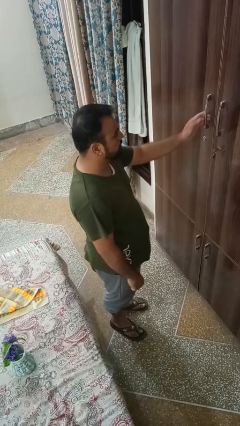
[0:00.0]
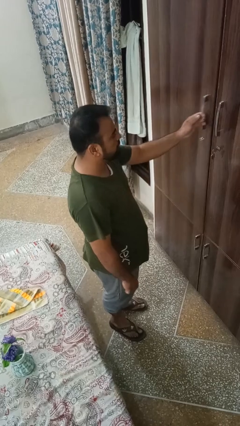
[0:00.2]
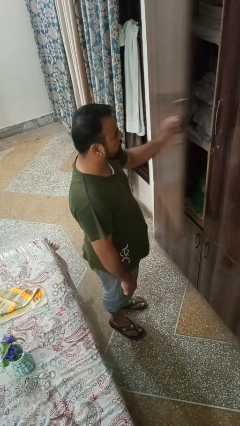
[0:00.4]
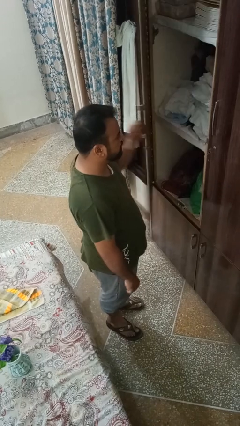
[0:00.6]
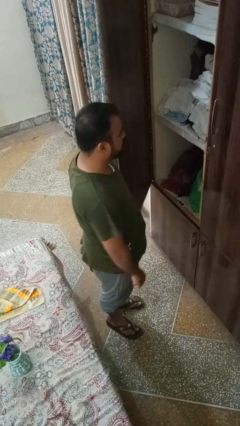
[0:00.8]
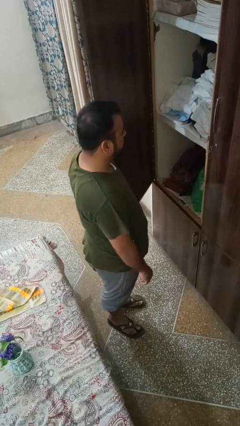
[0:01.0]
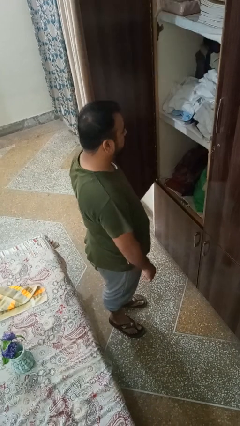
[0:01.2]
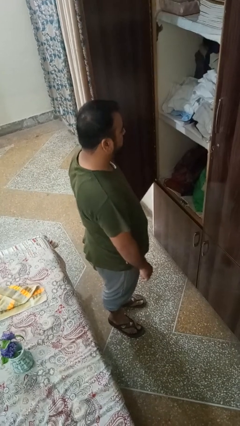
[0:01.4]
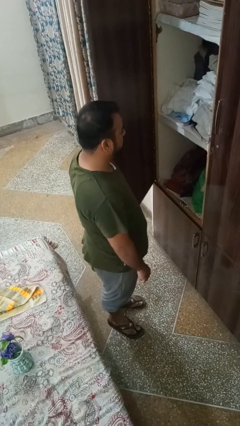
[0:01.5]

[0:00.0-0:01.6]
person opens closet door

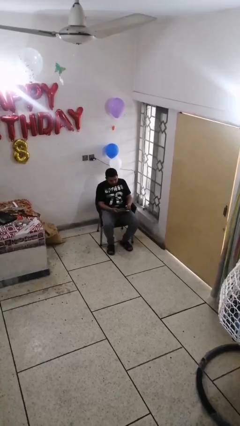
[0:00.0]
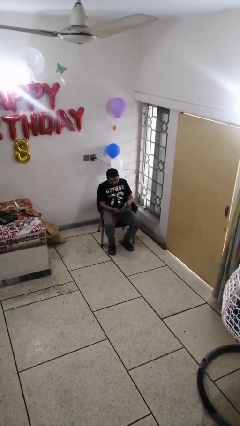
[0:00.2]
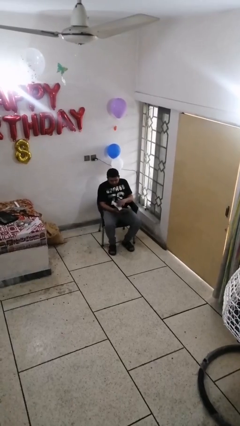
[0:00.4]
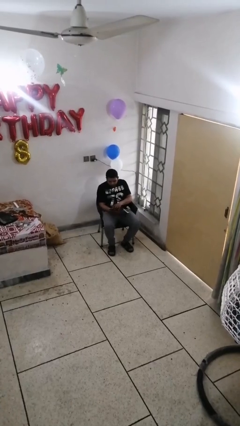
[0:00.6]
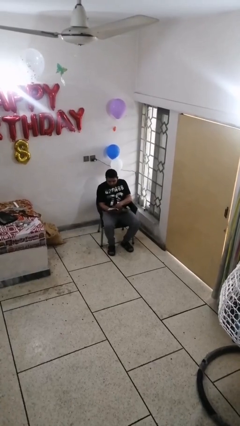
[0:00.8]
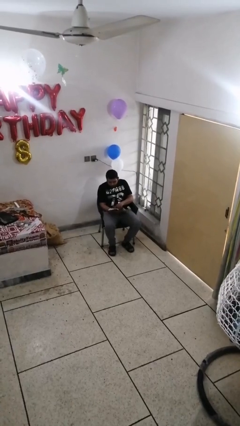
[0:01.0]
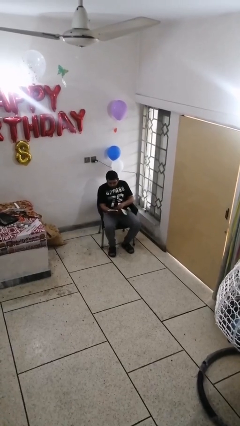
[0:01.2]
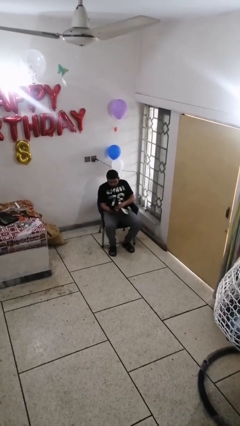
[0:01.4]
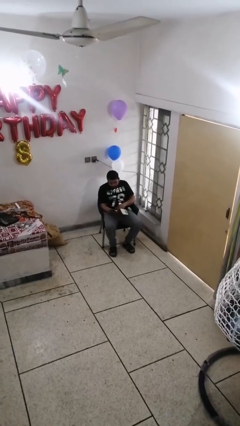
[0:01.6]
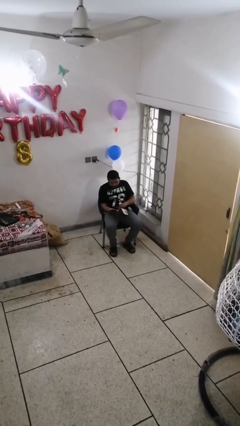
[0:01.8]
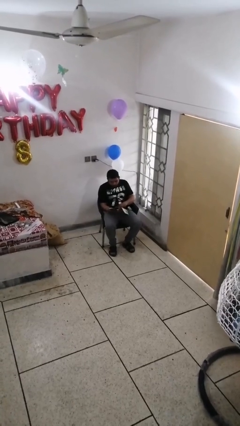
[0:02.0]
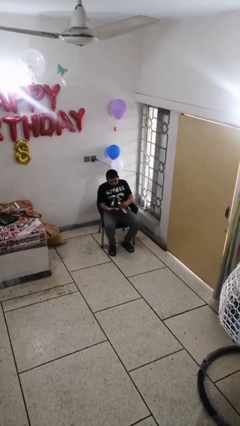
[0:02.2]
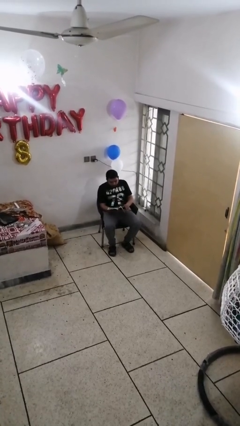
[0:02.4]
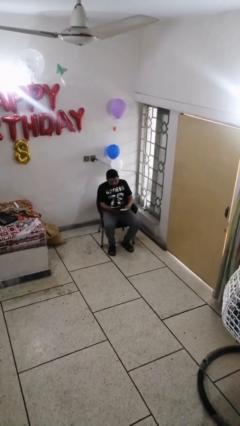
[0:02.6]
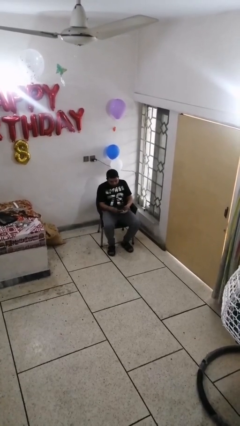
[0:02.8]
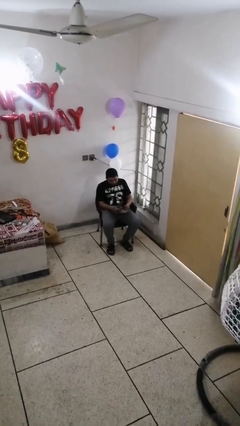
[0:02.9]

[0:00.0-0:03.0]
person reads document

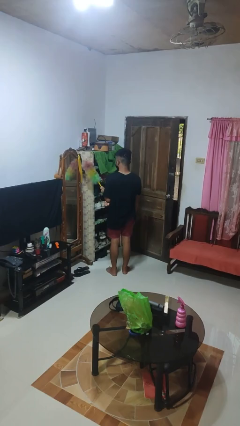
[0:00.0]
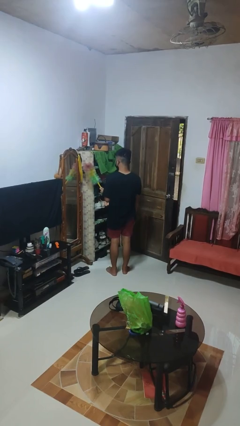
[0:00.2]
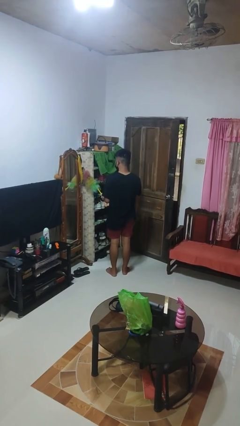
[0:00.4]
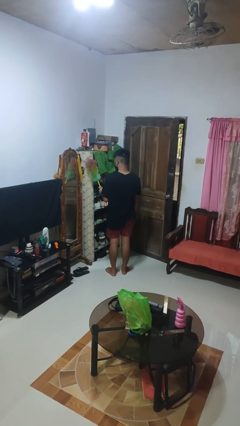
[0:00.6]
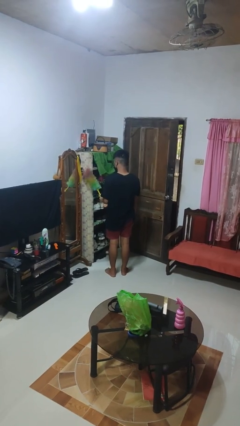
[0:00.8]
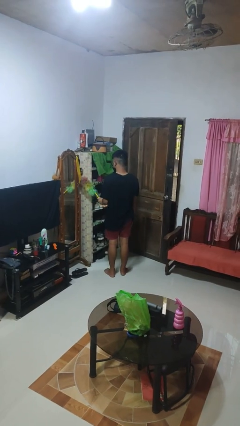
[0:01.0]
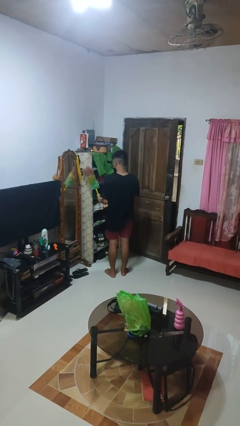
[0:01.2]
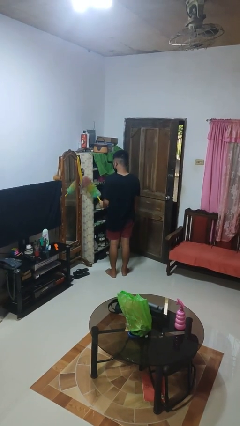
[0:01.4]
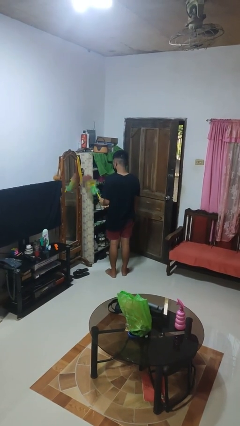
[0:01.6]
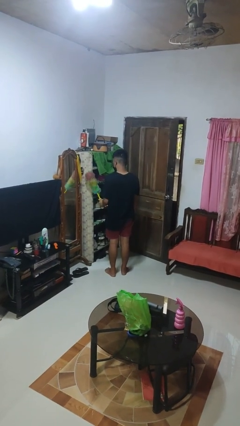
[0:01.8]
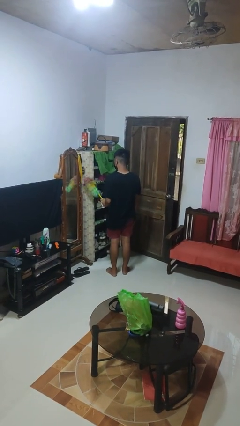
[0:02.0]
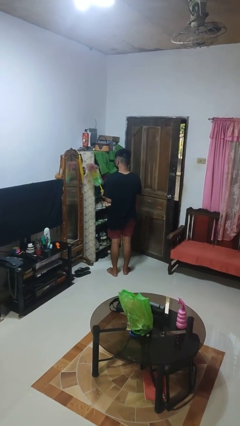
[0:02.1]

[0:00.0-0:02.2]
person dusts furniture

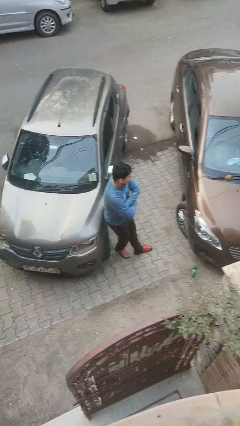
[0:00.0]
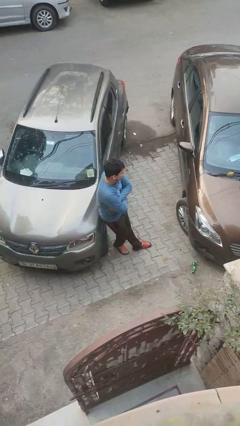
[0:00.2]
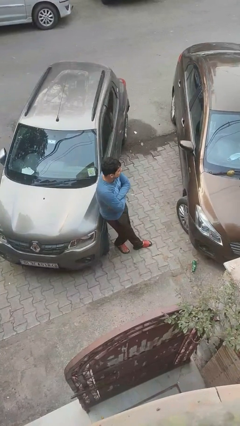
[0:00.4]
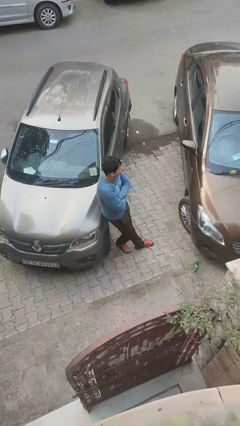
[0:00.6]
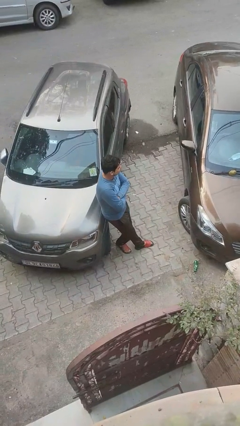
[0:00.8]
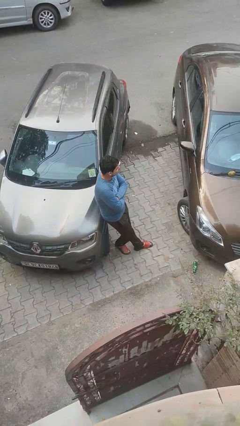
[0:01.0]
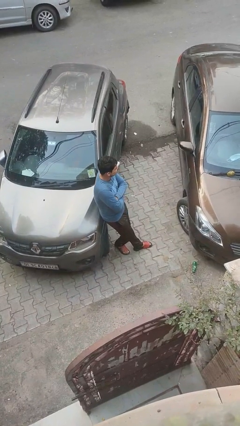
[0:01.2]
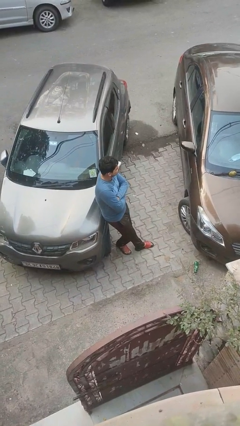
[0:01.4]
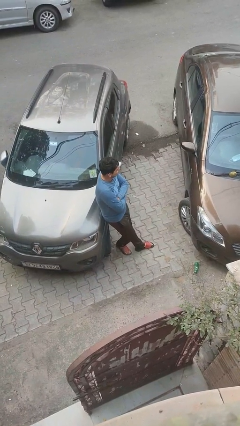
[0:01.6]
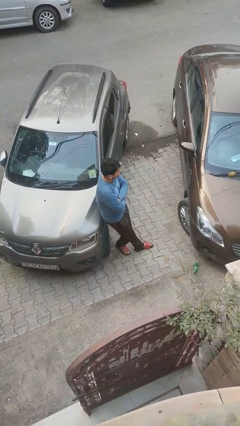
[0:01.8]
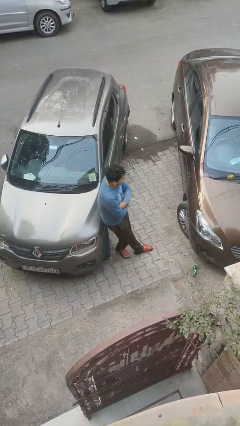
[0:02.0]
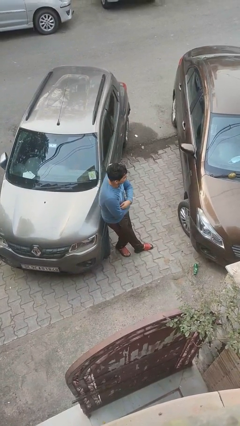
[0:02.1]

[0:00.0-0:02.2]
person leans against car

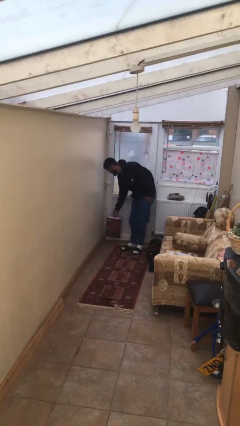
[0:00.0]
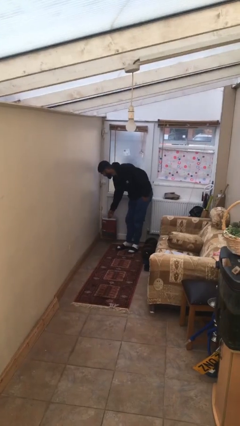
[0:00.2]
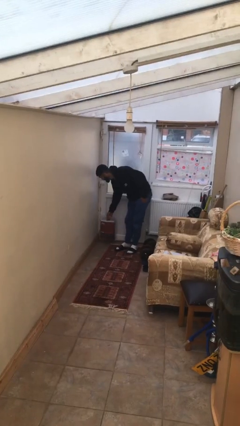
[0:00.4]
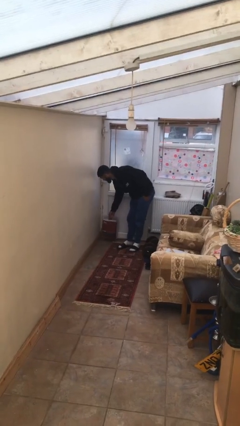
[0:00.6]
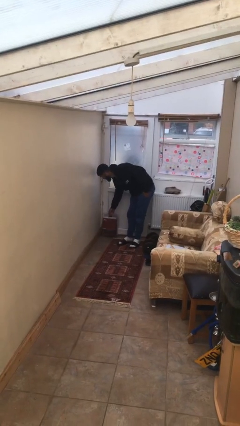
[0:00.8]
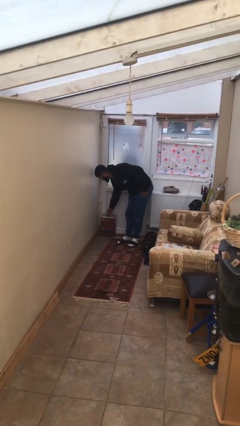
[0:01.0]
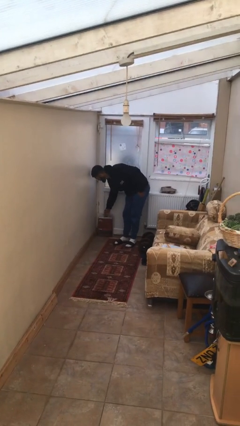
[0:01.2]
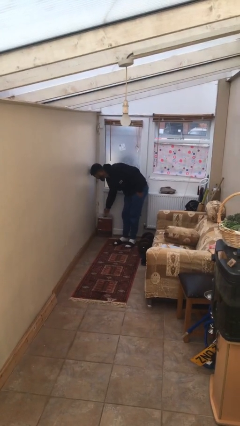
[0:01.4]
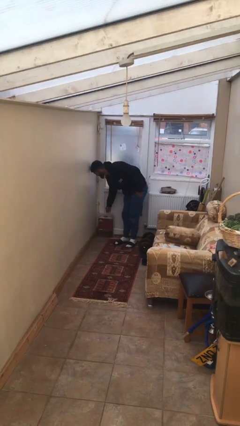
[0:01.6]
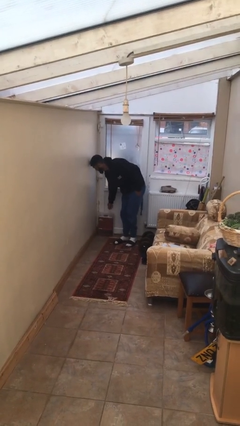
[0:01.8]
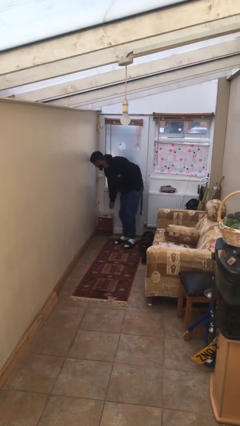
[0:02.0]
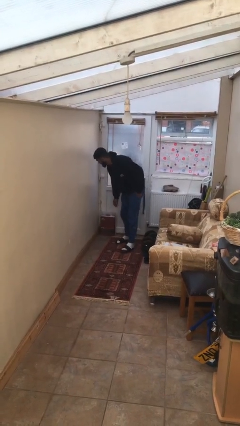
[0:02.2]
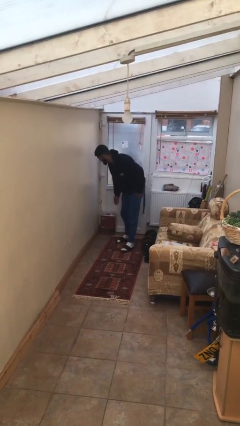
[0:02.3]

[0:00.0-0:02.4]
person puts down object on floor

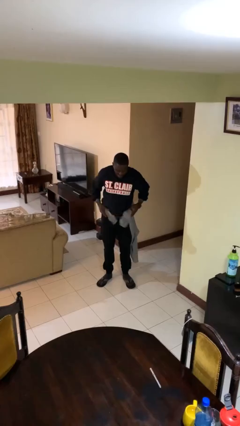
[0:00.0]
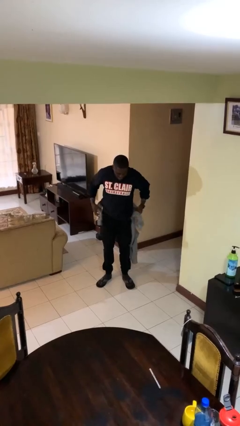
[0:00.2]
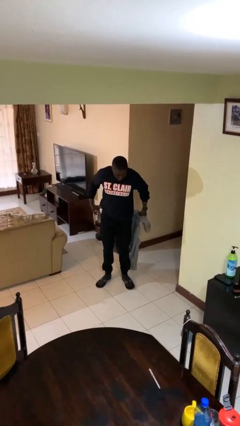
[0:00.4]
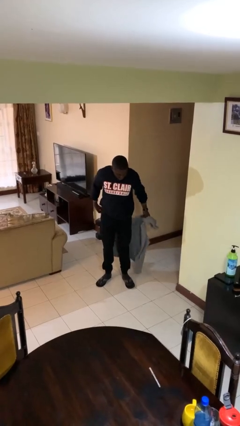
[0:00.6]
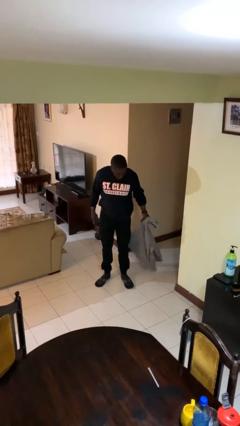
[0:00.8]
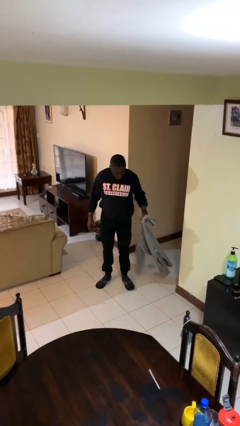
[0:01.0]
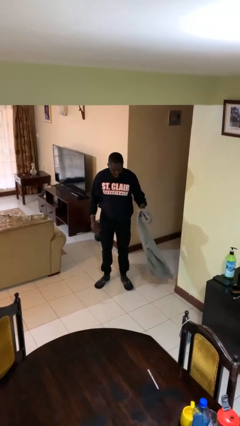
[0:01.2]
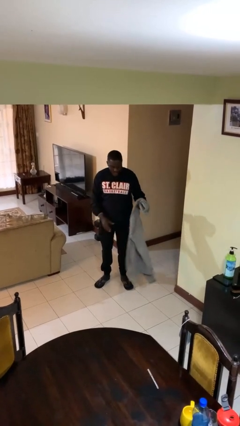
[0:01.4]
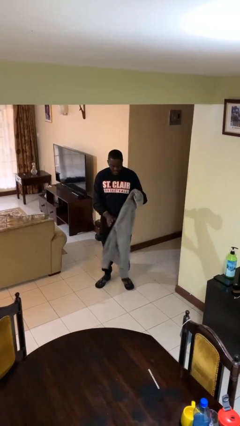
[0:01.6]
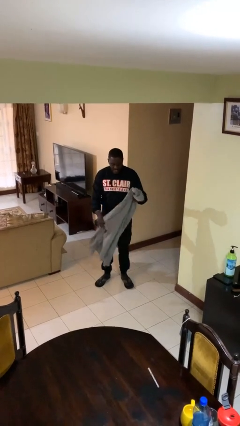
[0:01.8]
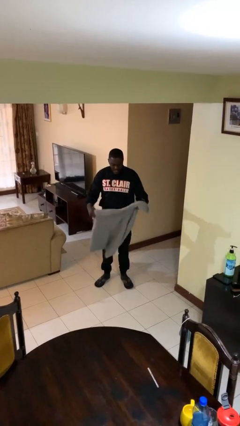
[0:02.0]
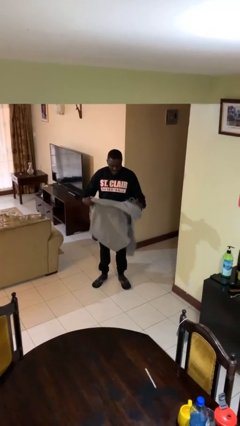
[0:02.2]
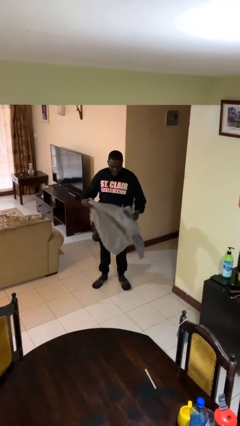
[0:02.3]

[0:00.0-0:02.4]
person unties jacket around waist

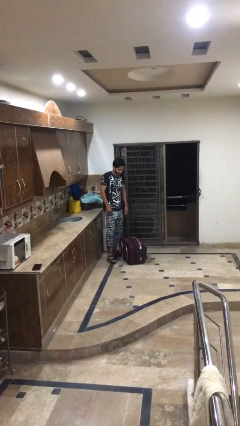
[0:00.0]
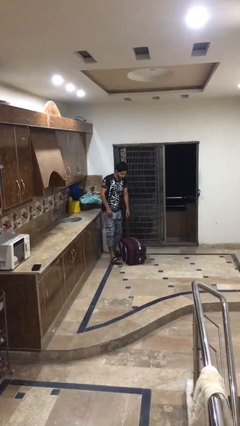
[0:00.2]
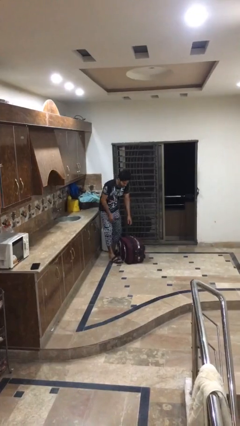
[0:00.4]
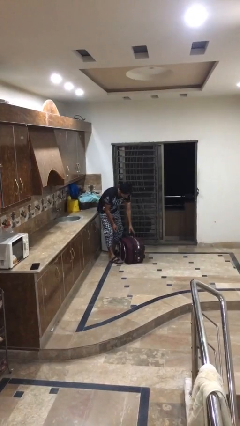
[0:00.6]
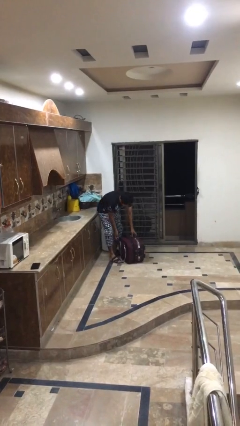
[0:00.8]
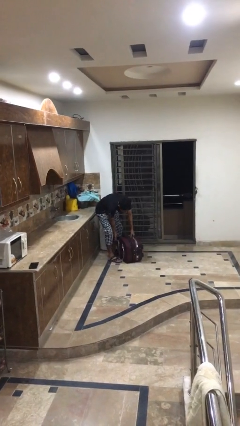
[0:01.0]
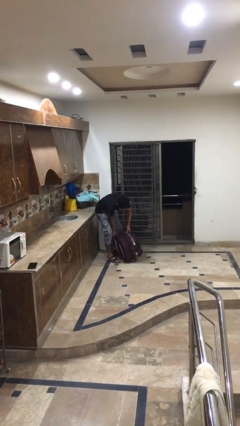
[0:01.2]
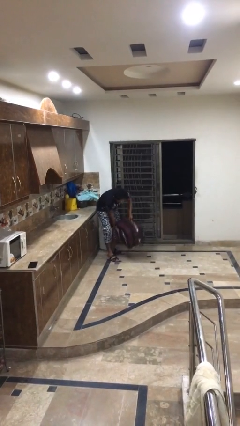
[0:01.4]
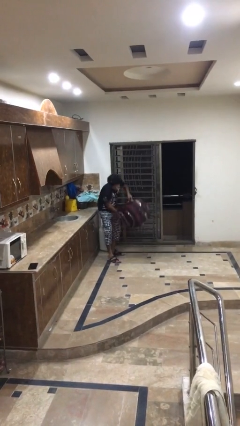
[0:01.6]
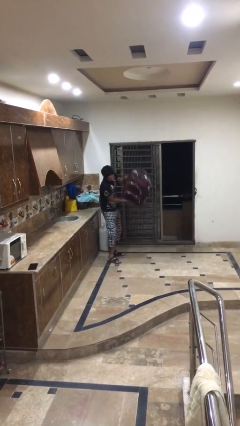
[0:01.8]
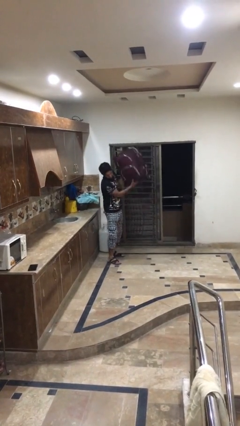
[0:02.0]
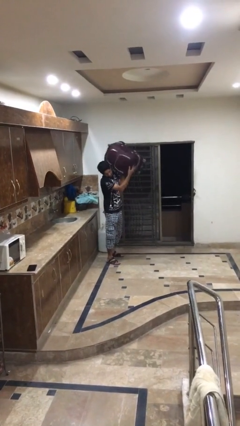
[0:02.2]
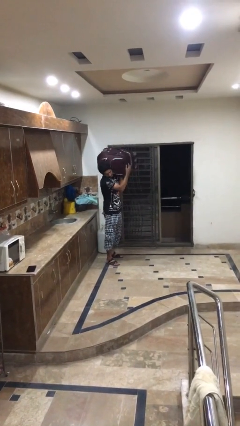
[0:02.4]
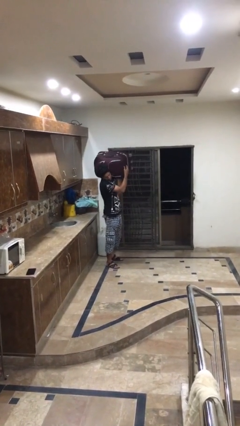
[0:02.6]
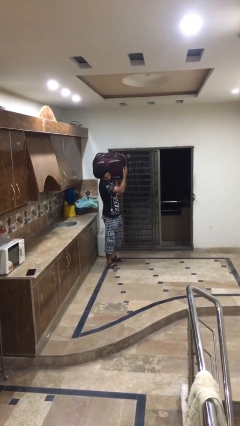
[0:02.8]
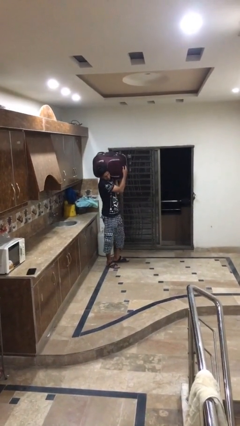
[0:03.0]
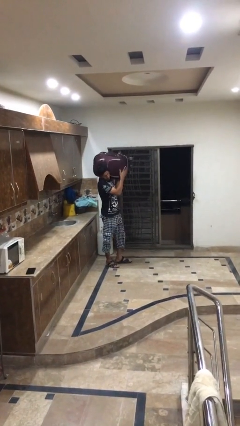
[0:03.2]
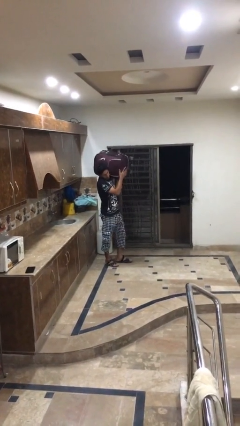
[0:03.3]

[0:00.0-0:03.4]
person picks up object from floor
